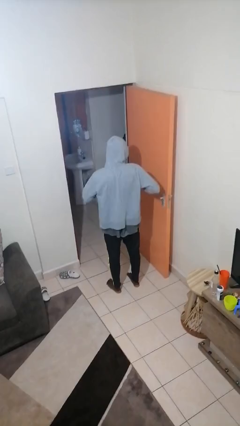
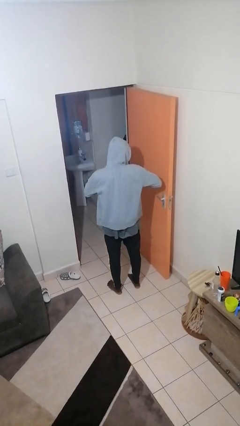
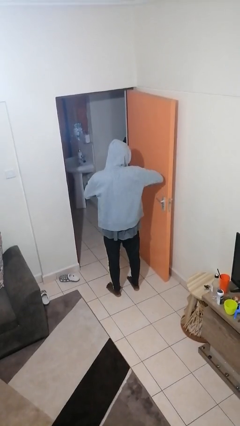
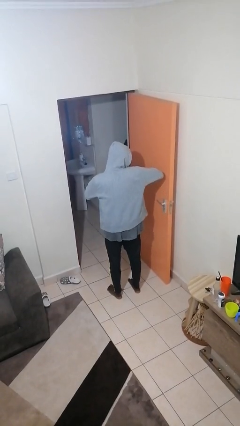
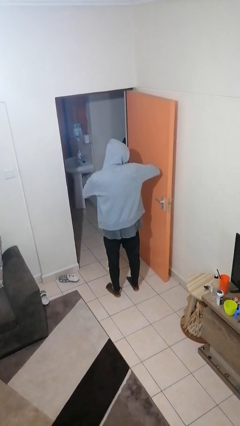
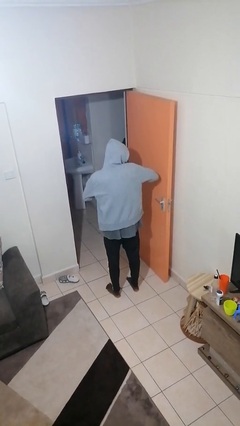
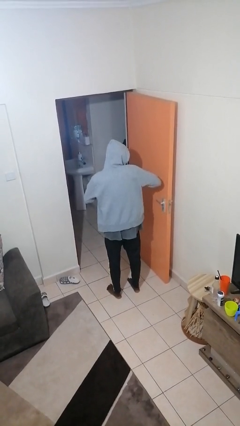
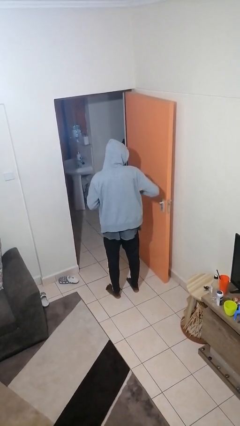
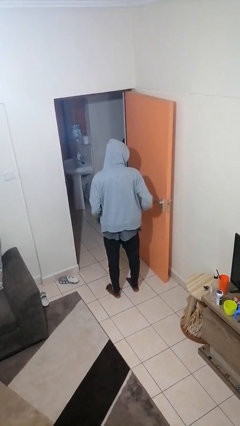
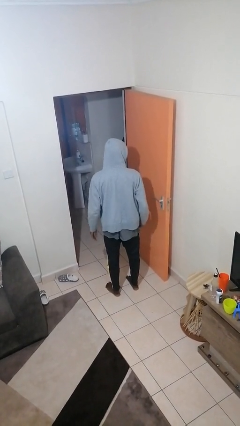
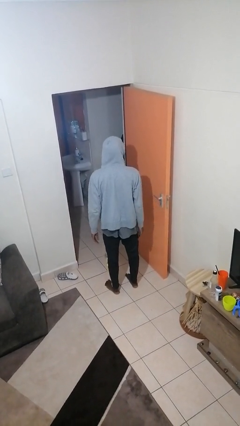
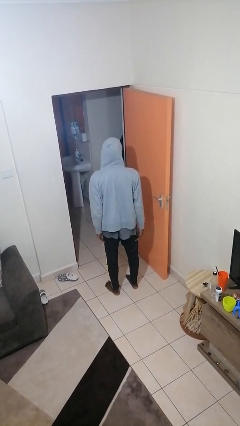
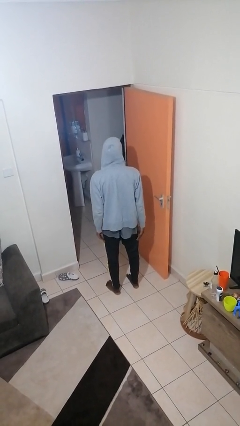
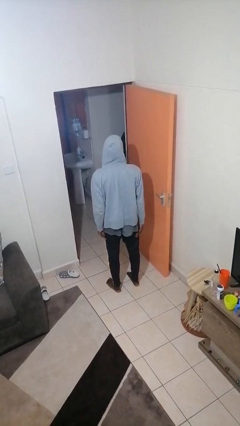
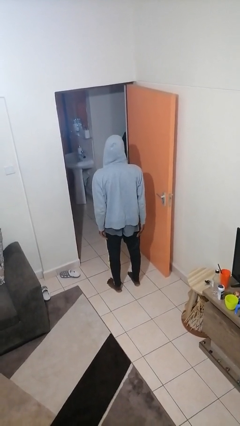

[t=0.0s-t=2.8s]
person puts on ring

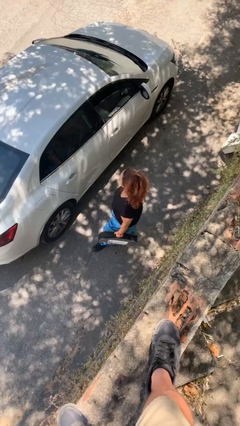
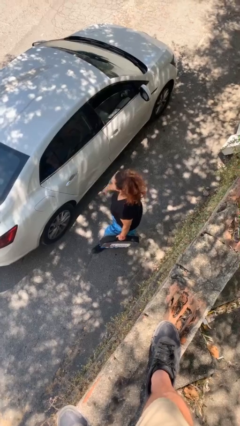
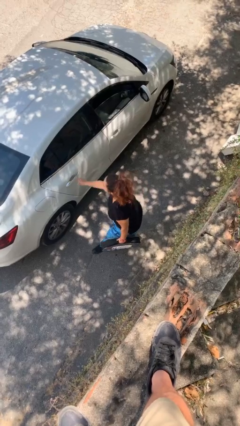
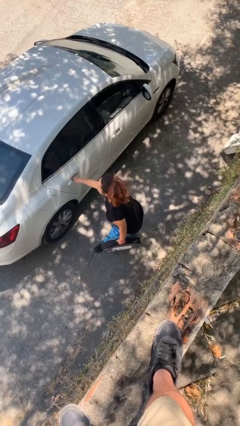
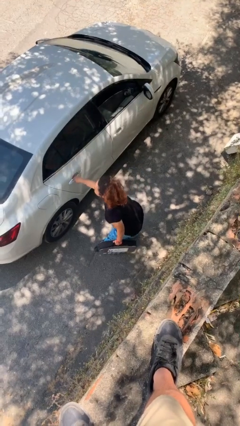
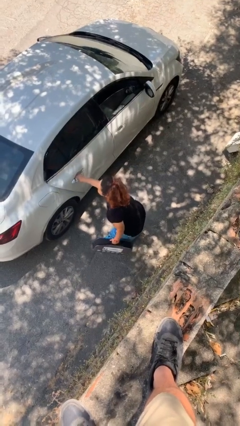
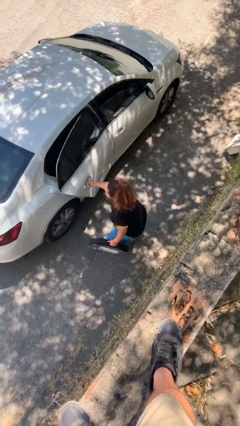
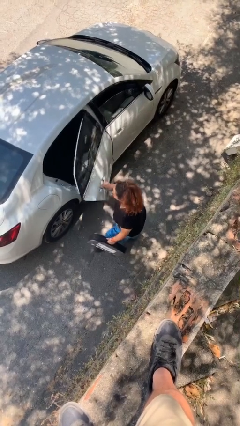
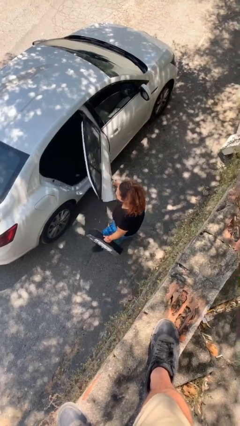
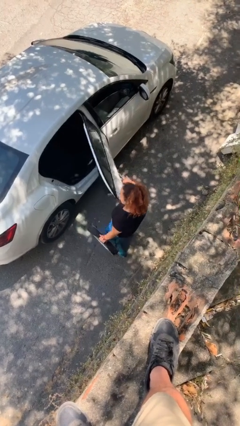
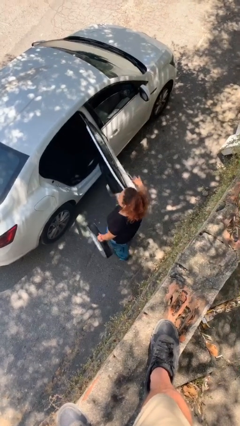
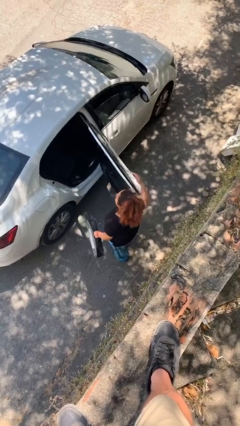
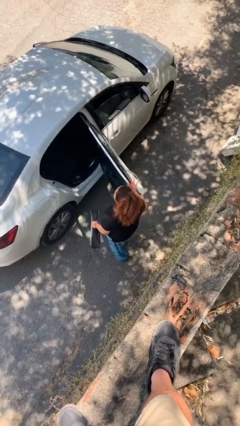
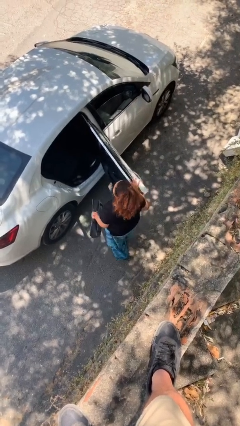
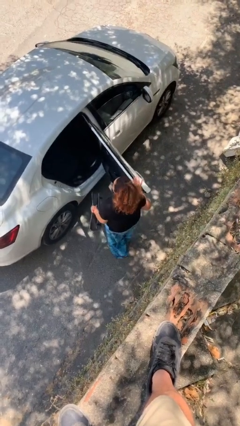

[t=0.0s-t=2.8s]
person opens car door

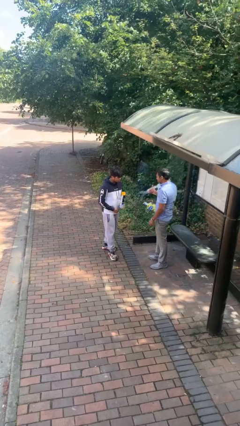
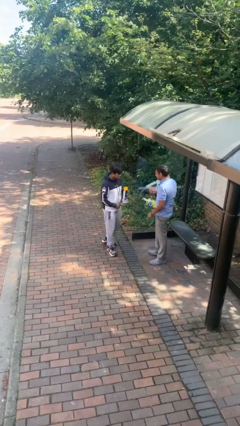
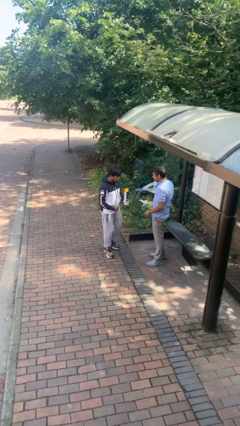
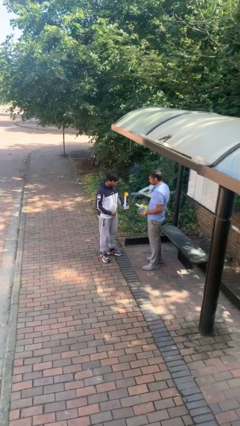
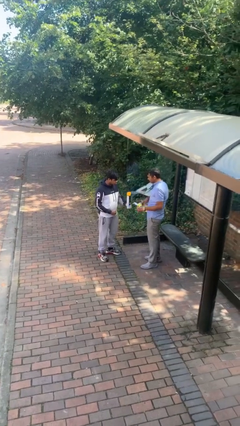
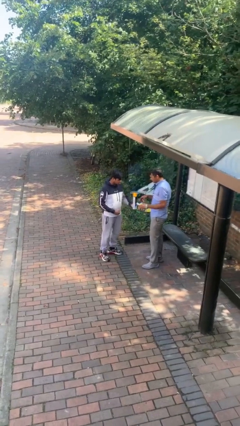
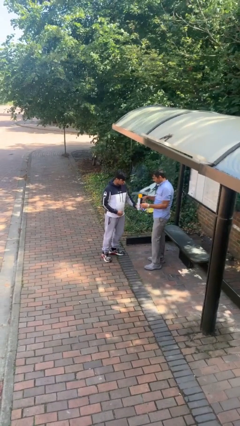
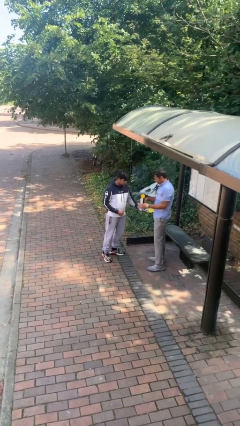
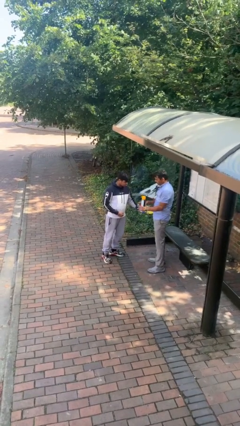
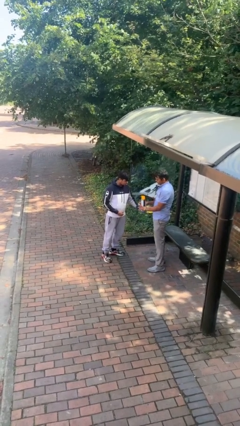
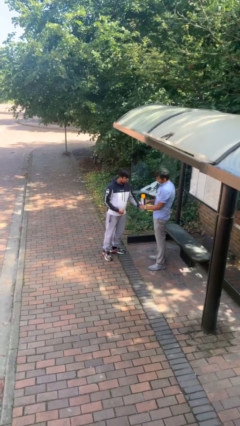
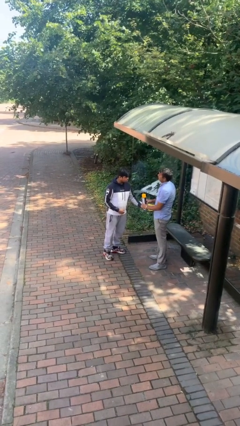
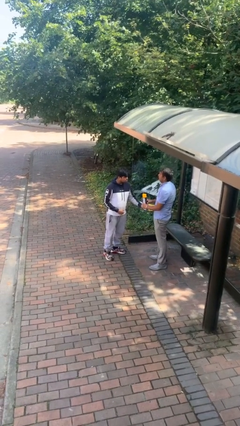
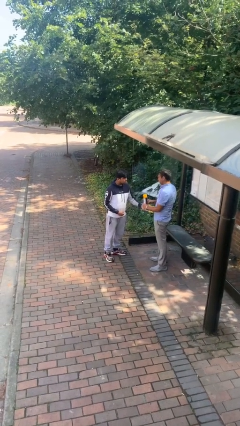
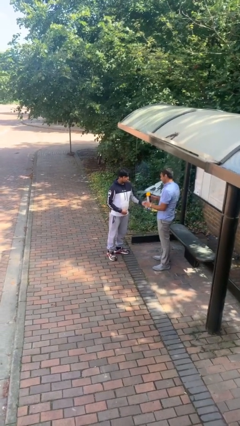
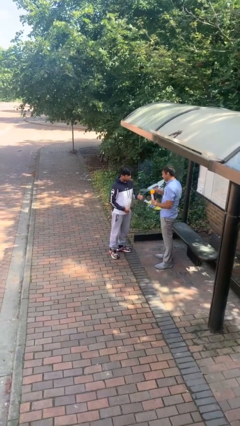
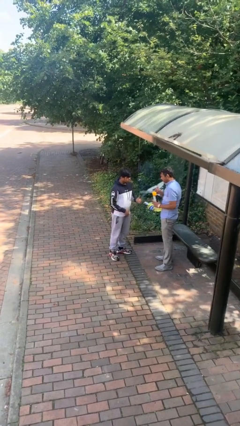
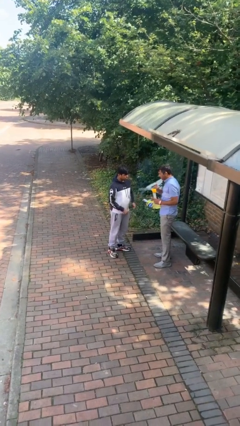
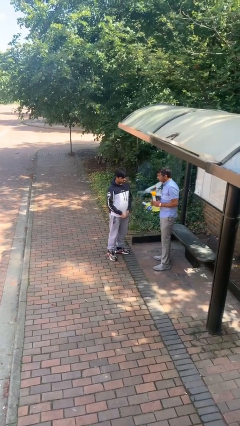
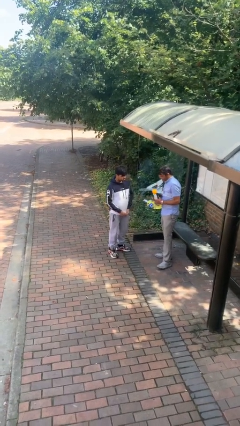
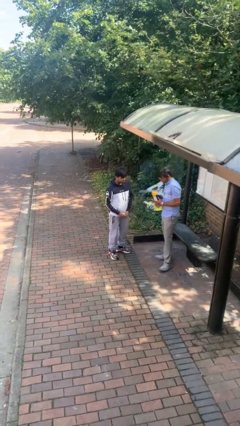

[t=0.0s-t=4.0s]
person transfers object to person

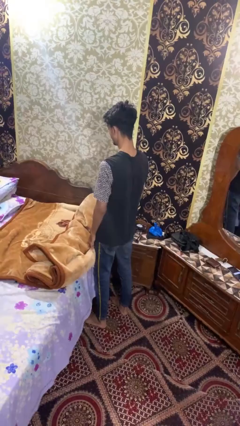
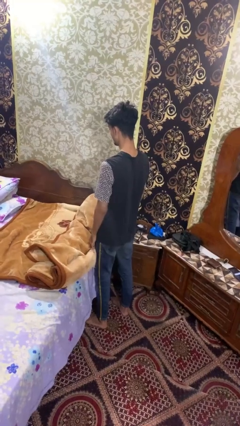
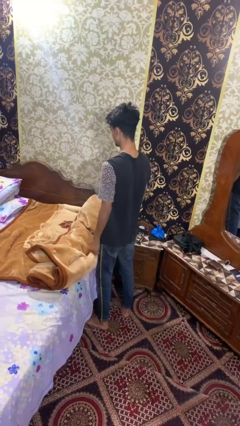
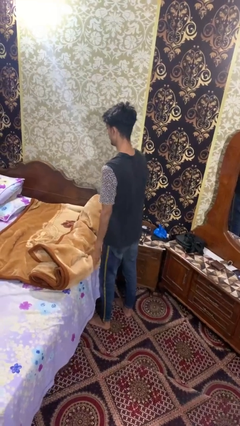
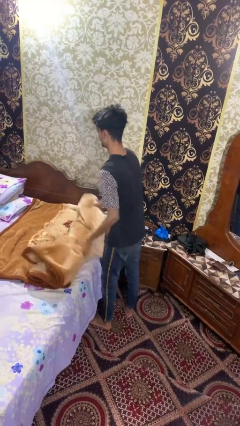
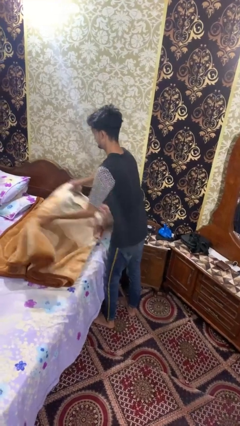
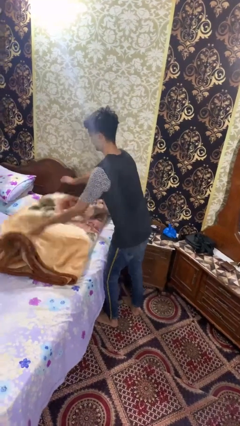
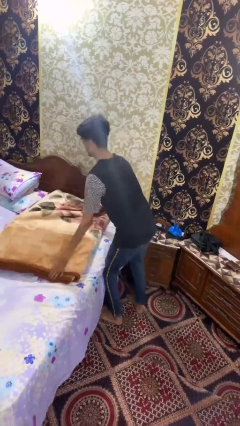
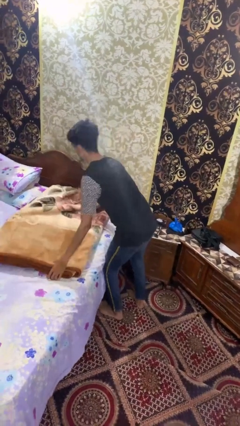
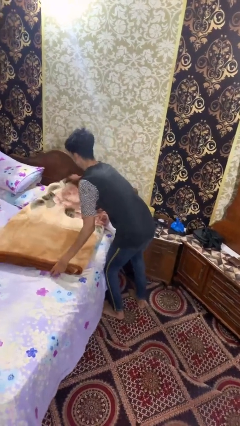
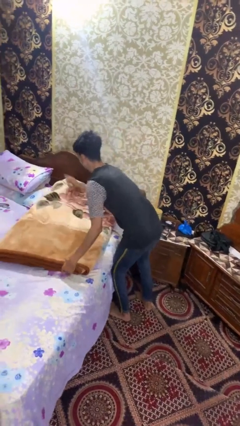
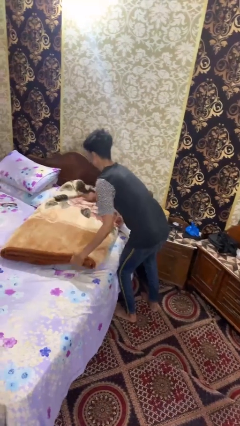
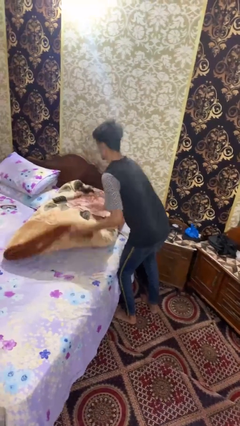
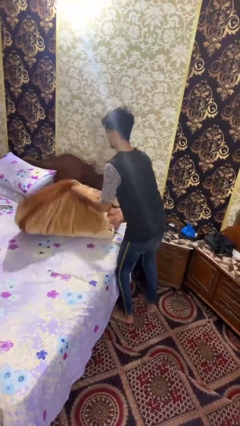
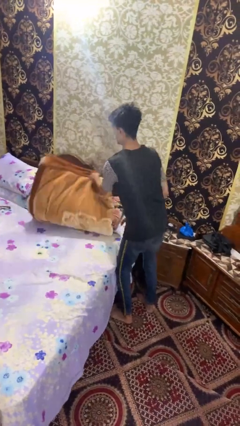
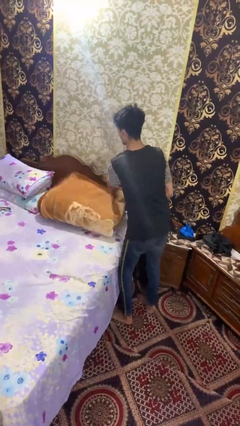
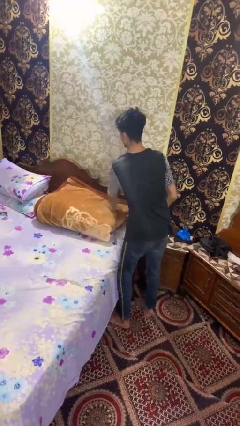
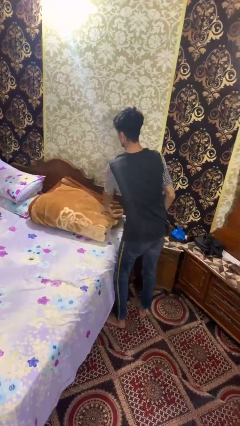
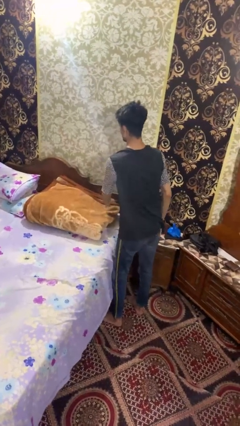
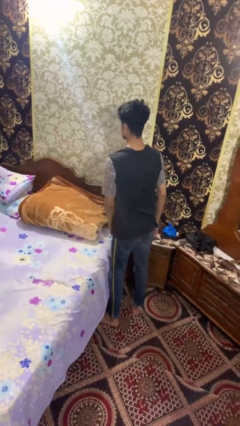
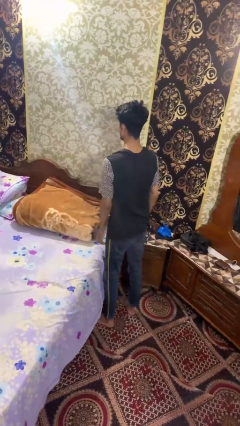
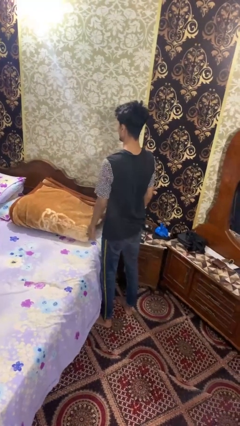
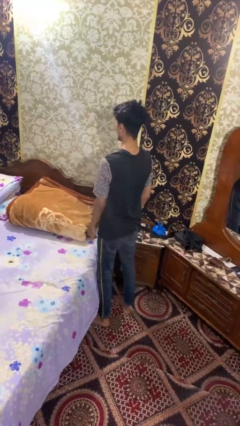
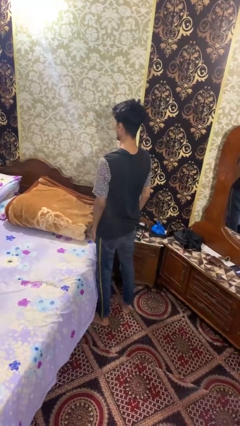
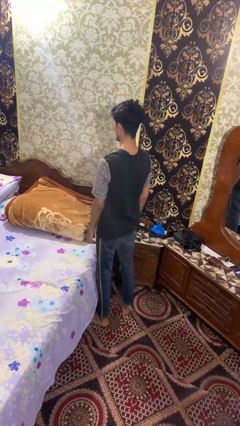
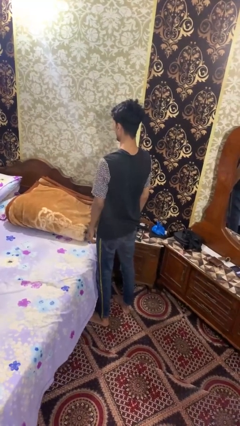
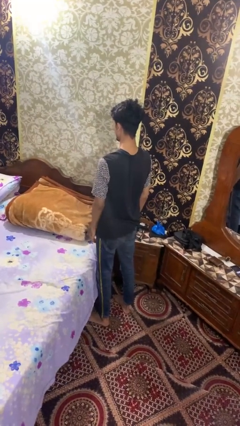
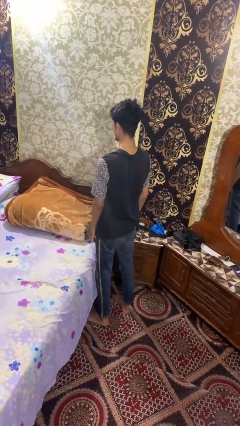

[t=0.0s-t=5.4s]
person folds blanket

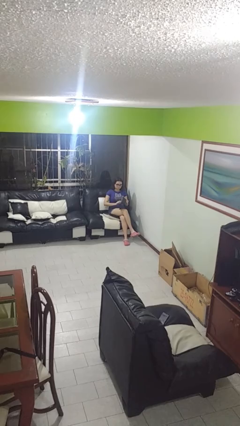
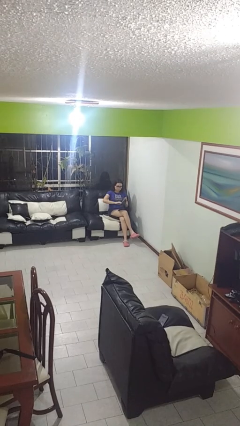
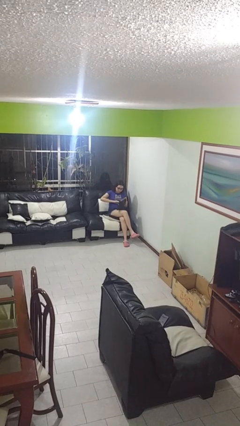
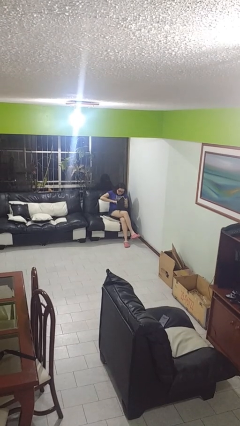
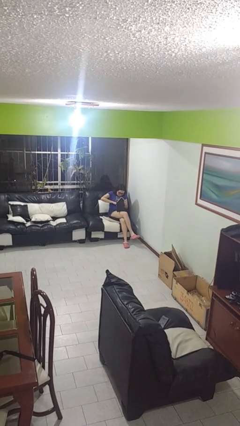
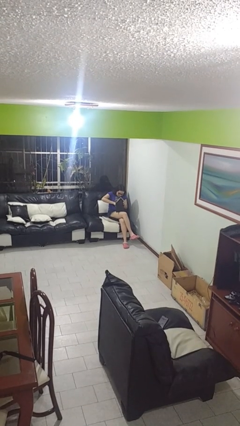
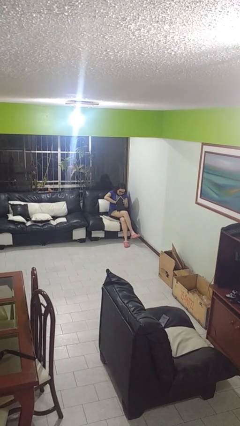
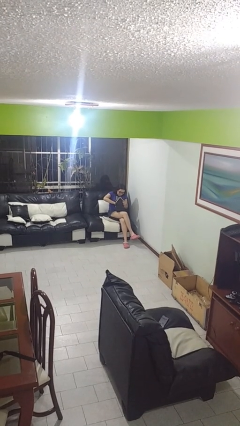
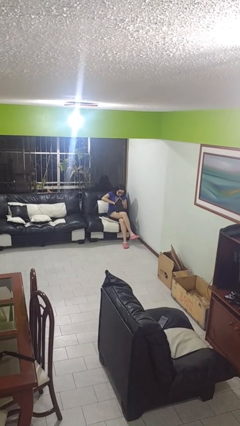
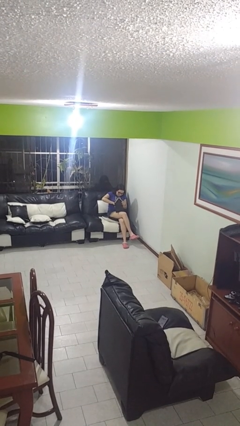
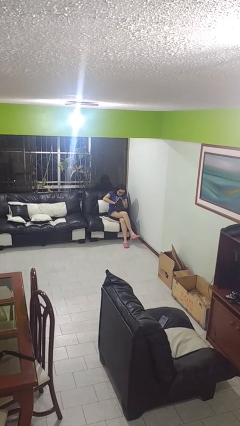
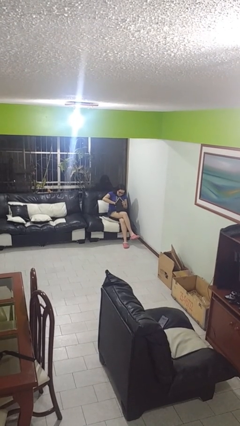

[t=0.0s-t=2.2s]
person searches in purse

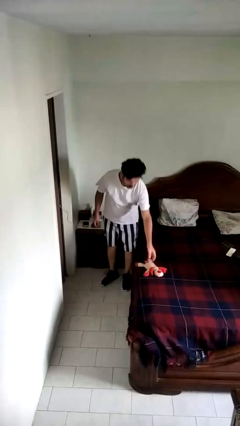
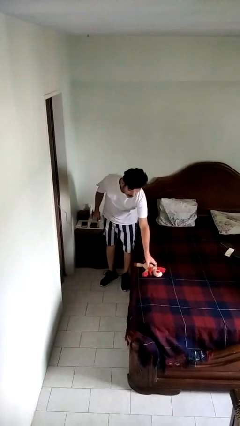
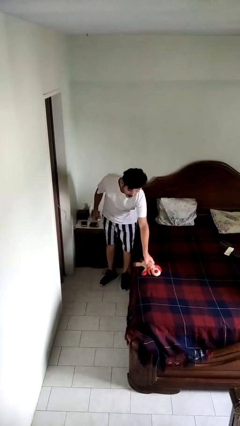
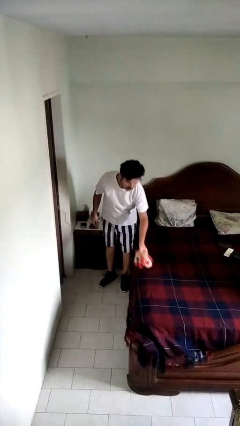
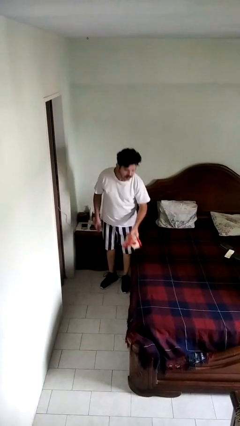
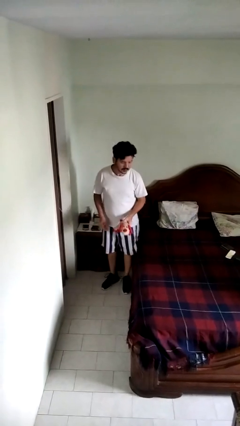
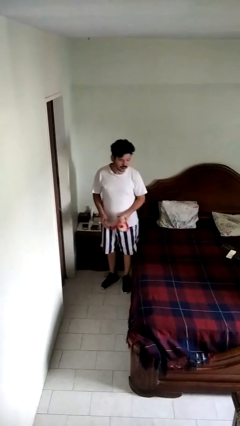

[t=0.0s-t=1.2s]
person picks up object from bed
